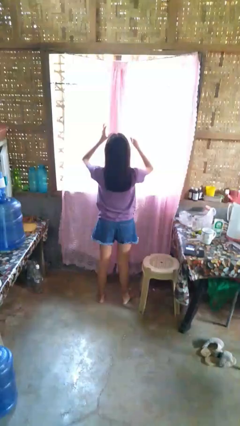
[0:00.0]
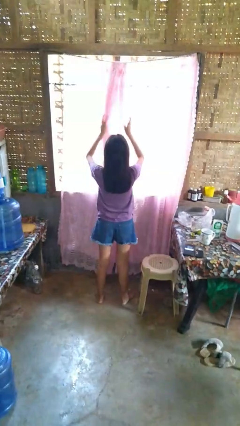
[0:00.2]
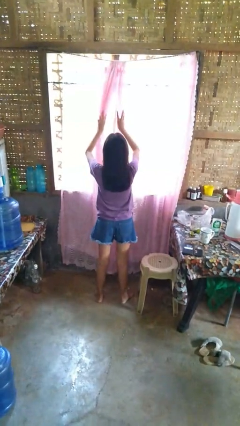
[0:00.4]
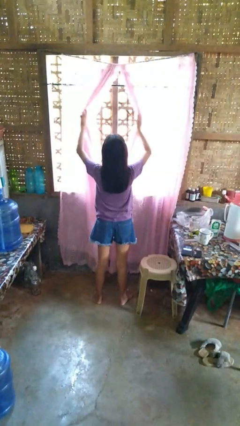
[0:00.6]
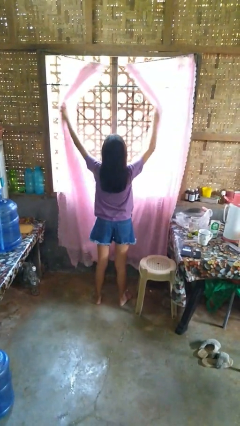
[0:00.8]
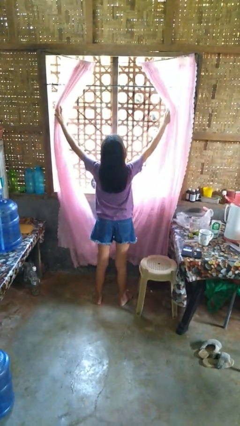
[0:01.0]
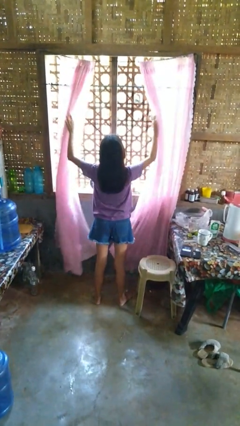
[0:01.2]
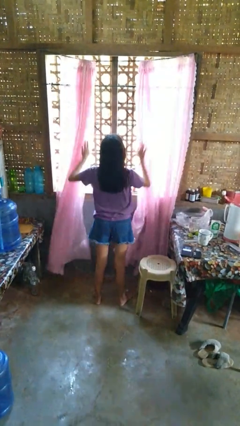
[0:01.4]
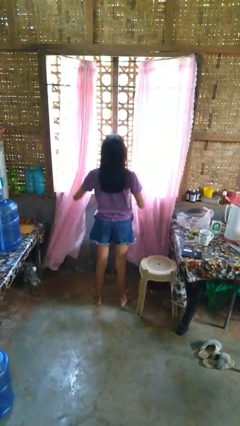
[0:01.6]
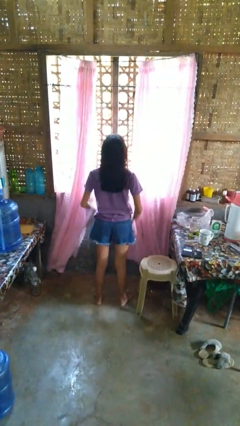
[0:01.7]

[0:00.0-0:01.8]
person opens curtains

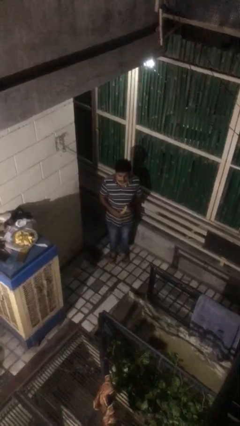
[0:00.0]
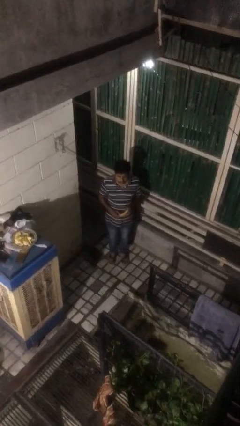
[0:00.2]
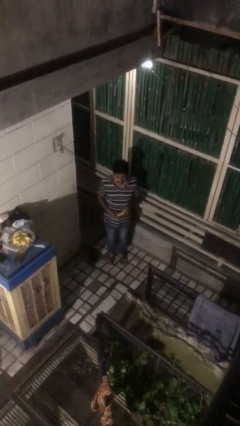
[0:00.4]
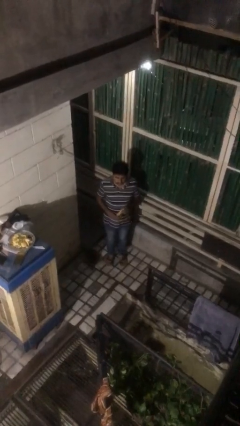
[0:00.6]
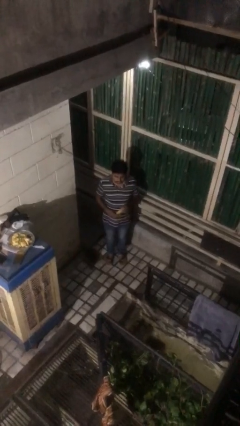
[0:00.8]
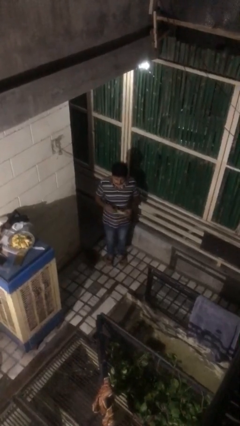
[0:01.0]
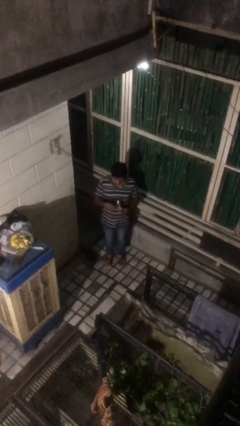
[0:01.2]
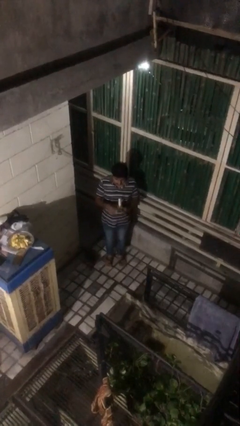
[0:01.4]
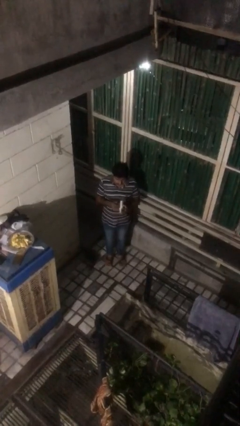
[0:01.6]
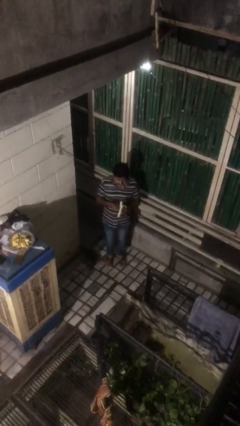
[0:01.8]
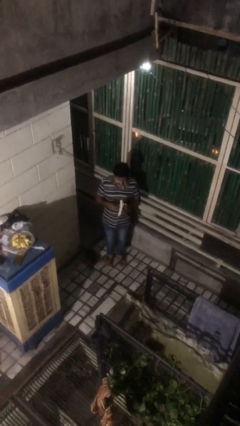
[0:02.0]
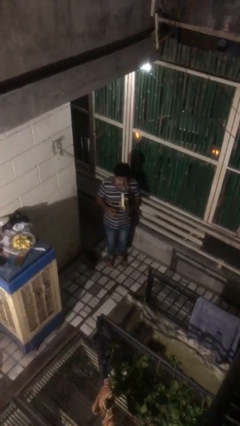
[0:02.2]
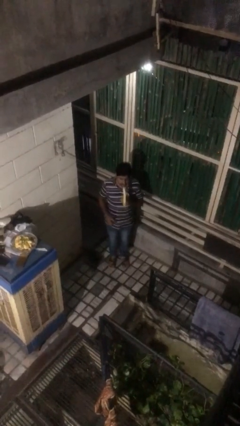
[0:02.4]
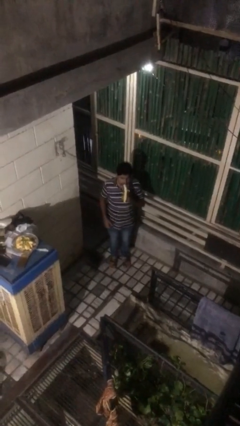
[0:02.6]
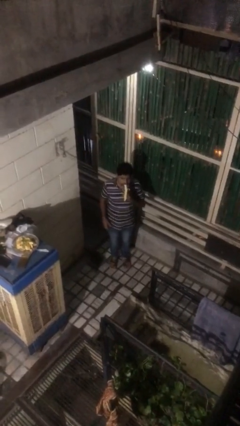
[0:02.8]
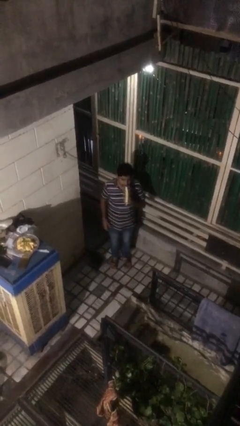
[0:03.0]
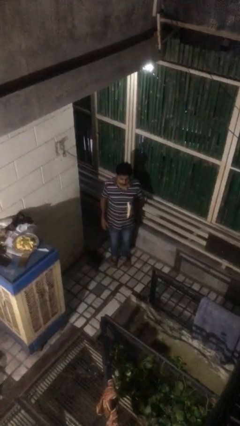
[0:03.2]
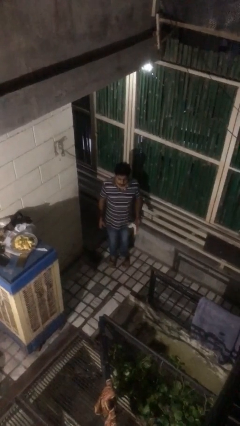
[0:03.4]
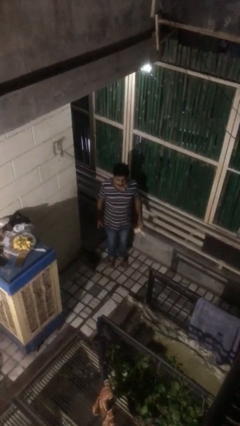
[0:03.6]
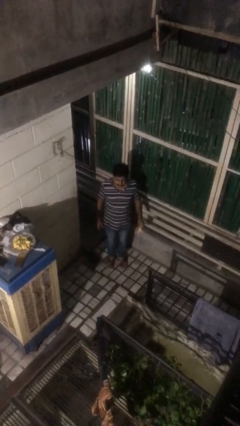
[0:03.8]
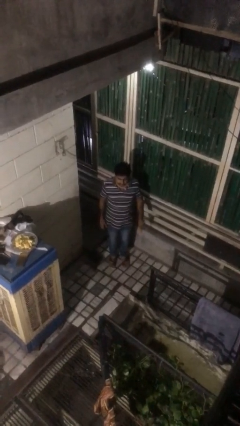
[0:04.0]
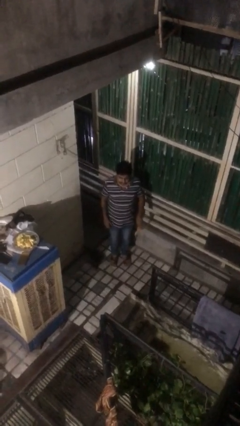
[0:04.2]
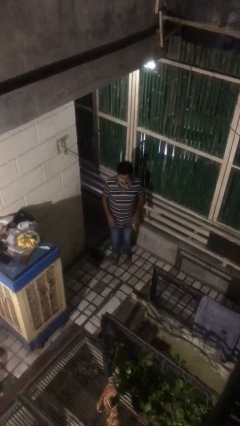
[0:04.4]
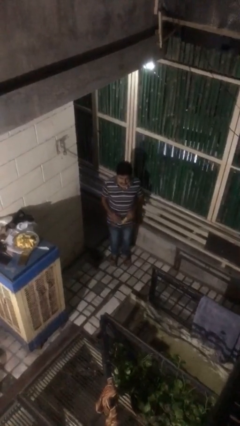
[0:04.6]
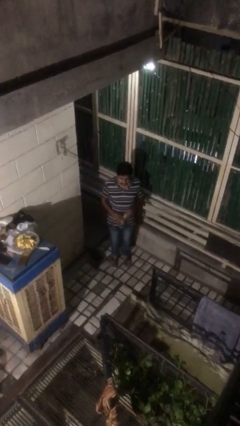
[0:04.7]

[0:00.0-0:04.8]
person eats banana

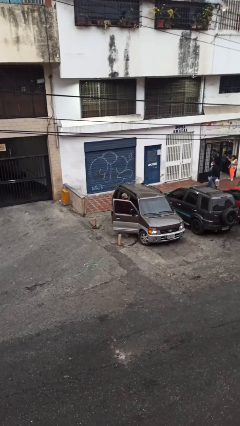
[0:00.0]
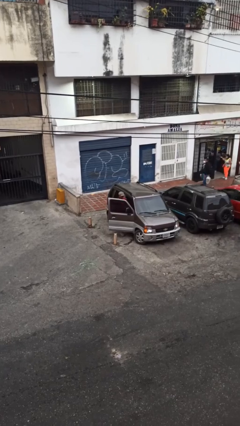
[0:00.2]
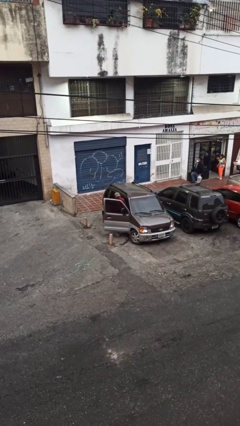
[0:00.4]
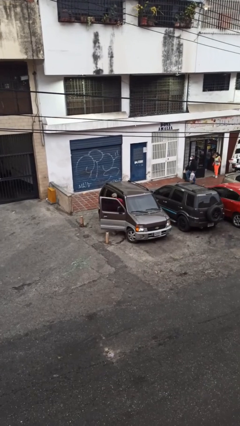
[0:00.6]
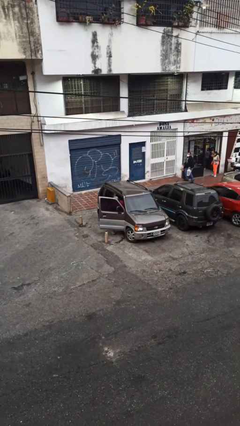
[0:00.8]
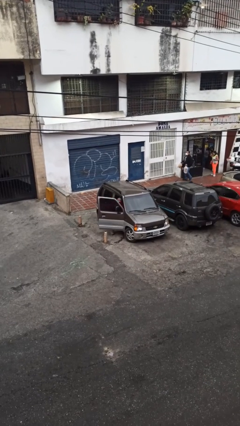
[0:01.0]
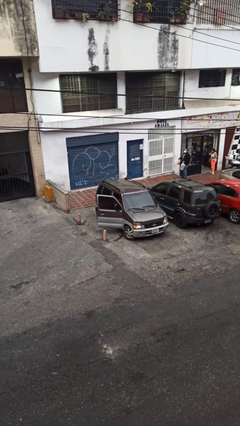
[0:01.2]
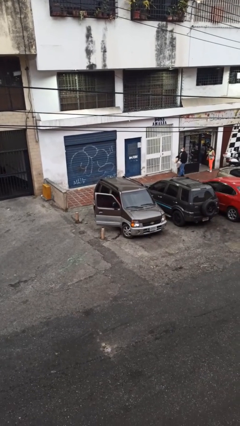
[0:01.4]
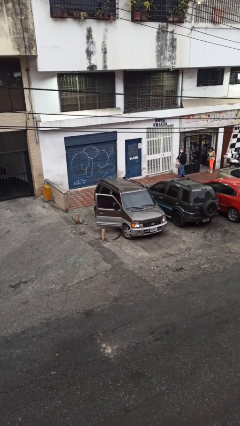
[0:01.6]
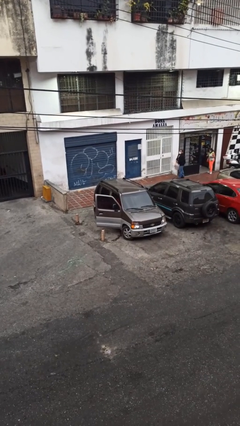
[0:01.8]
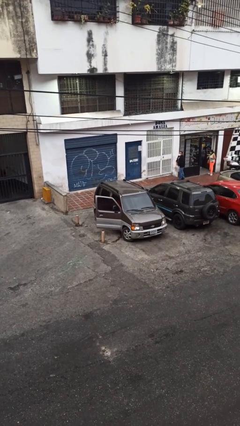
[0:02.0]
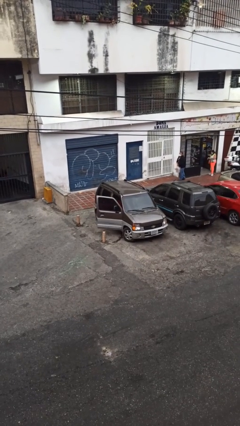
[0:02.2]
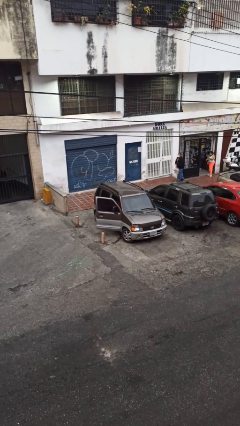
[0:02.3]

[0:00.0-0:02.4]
person enters car

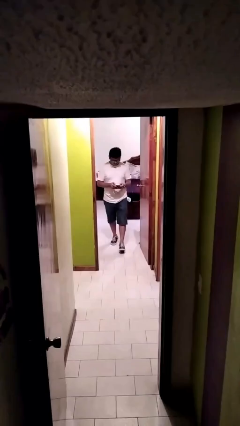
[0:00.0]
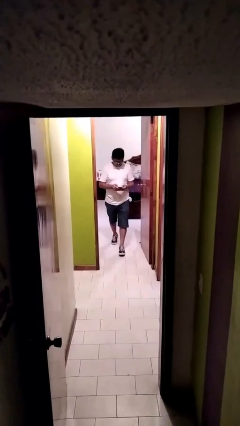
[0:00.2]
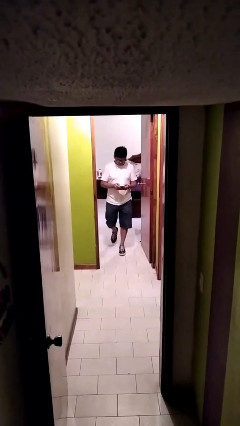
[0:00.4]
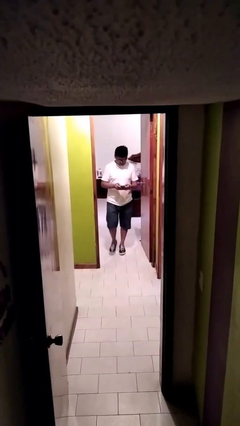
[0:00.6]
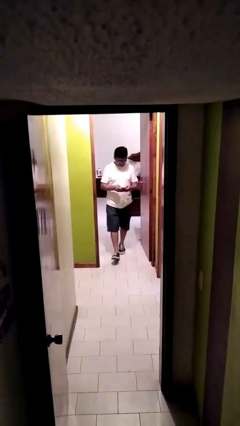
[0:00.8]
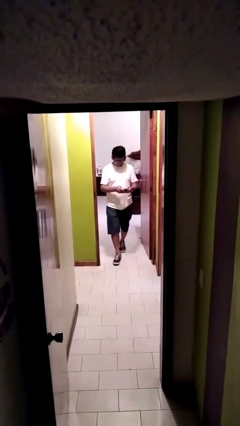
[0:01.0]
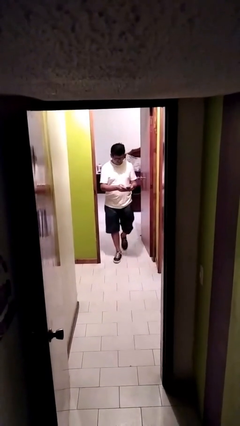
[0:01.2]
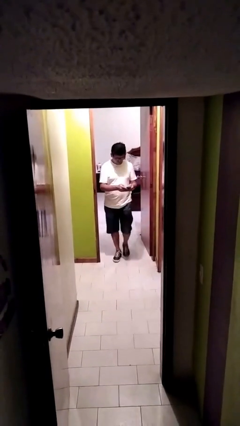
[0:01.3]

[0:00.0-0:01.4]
person enters scene through structure

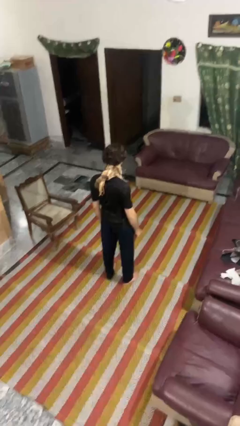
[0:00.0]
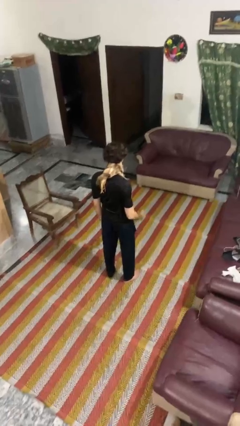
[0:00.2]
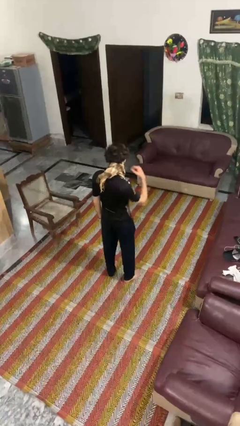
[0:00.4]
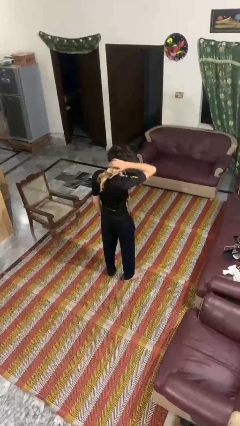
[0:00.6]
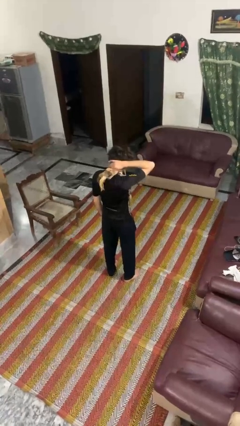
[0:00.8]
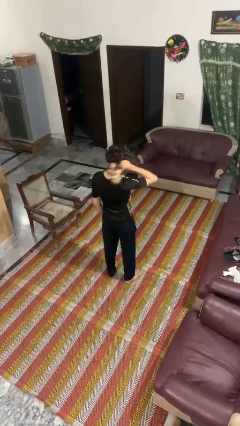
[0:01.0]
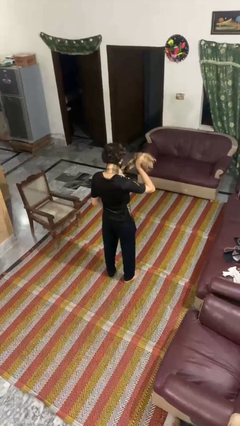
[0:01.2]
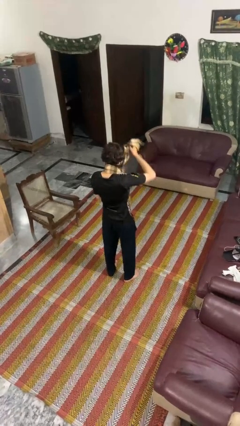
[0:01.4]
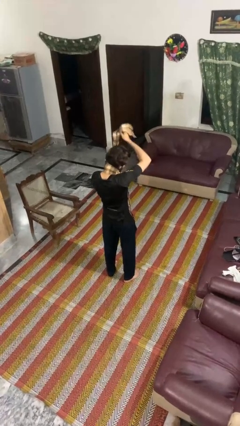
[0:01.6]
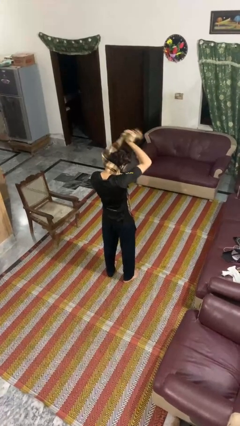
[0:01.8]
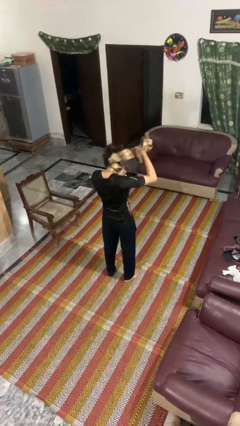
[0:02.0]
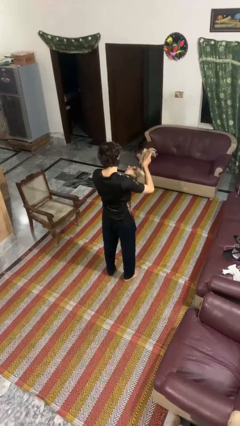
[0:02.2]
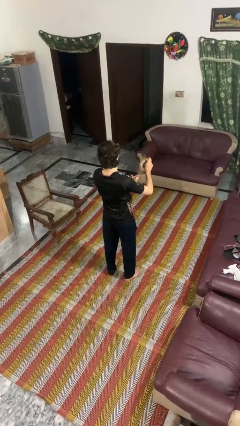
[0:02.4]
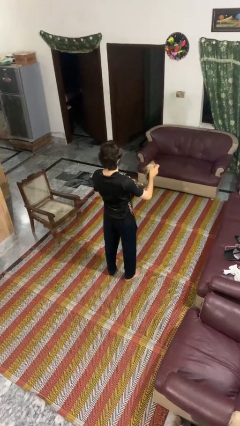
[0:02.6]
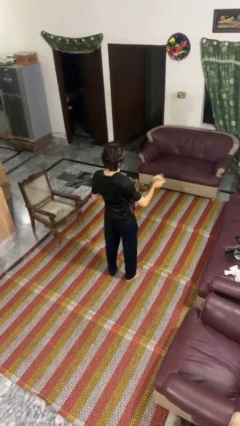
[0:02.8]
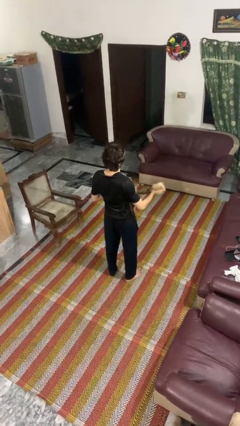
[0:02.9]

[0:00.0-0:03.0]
person takes off scarf

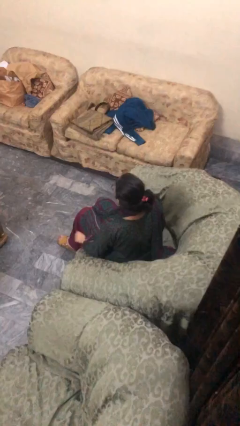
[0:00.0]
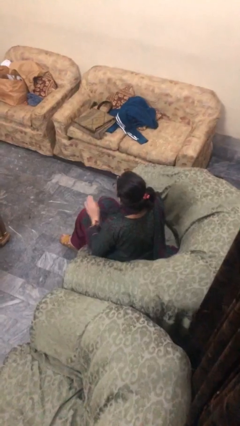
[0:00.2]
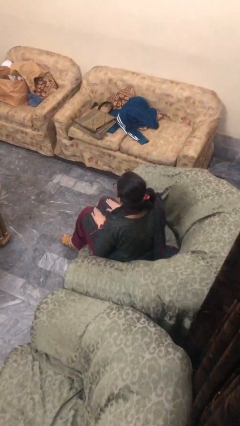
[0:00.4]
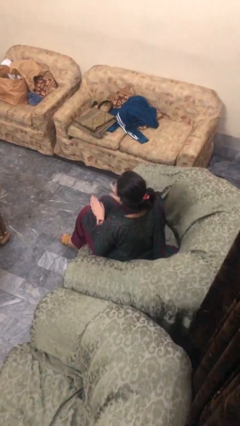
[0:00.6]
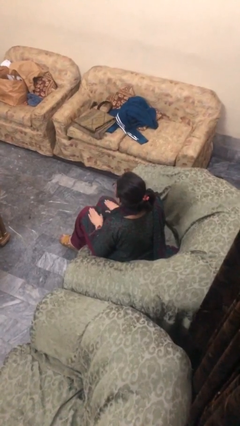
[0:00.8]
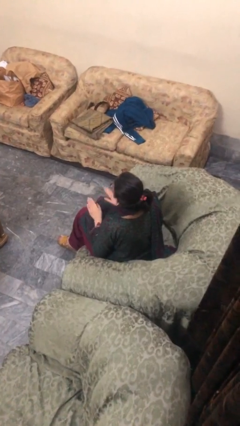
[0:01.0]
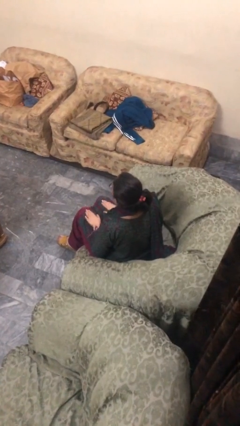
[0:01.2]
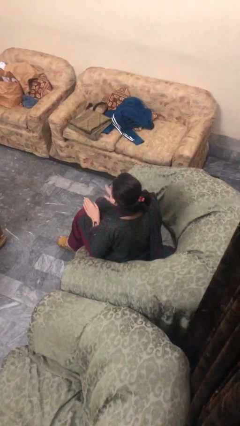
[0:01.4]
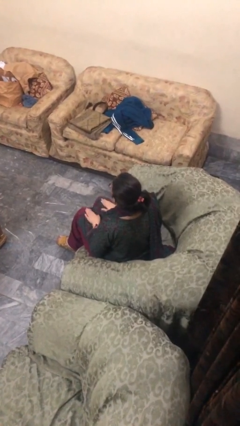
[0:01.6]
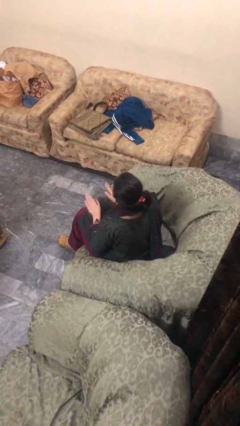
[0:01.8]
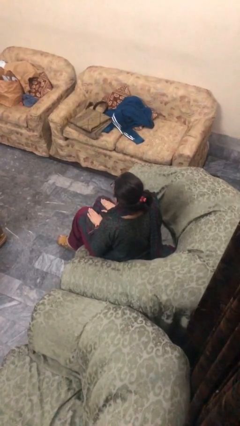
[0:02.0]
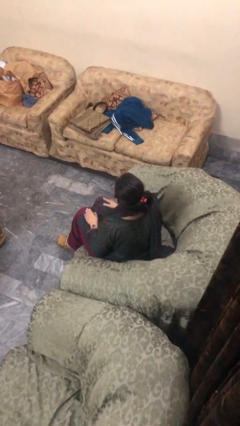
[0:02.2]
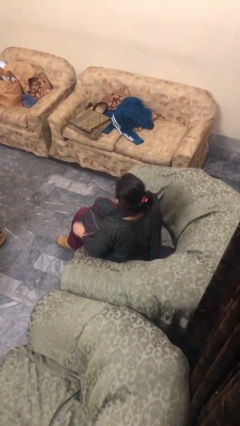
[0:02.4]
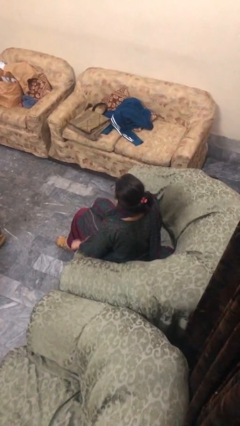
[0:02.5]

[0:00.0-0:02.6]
person slaps hands on thighs

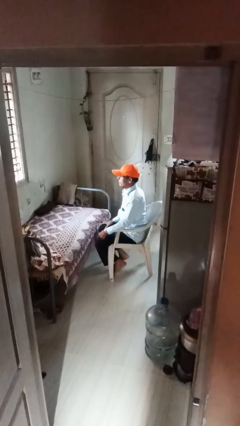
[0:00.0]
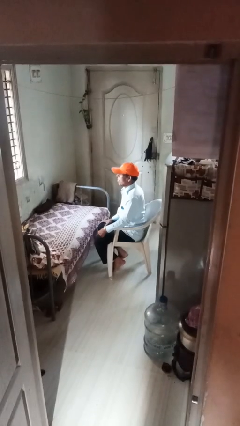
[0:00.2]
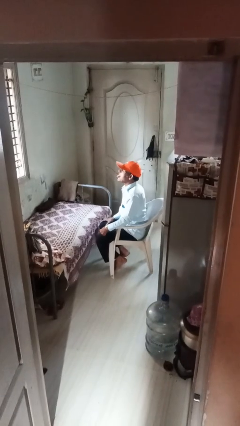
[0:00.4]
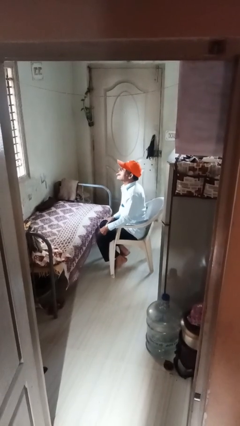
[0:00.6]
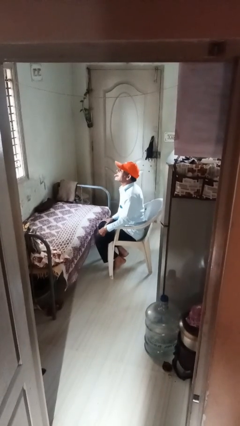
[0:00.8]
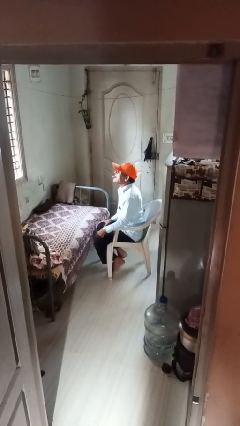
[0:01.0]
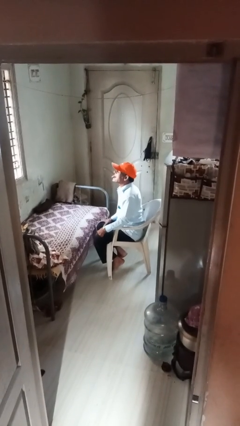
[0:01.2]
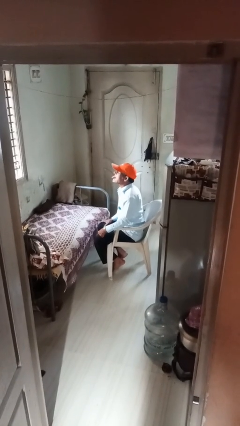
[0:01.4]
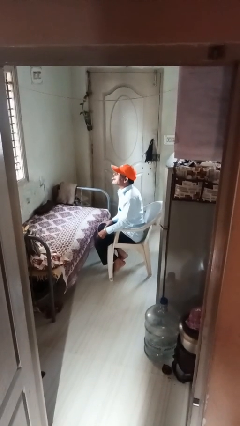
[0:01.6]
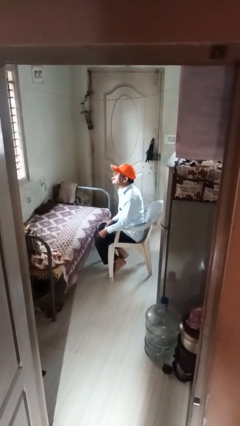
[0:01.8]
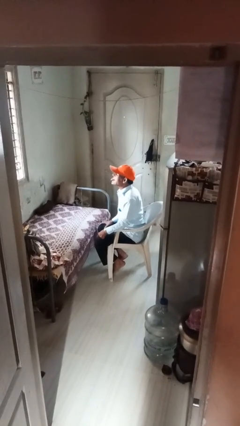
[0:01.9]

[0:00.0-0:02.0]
person sticks out tongue
